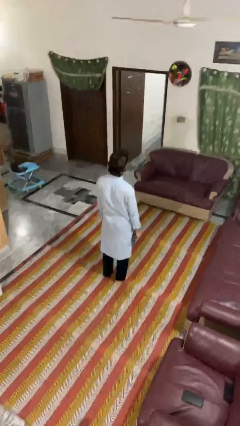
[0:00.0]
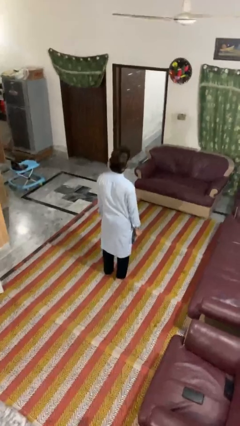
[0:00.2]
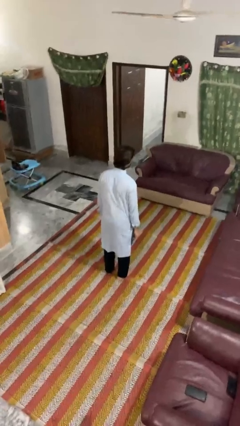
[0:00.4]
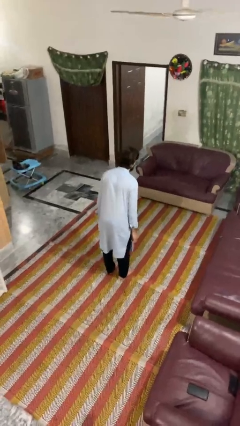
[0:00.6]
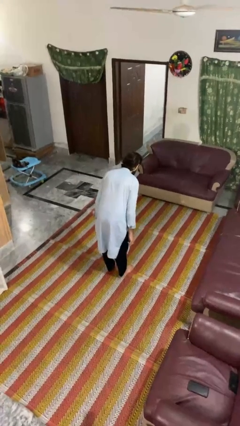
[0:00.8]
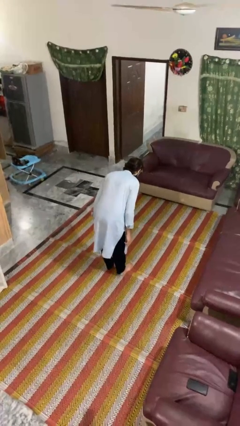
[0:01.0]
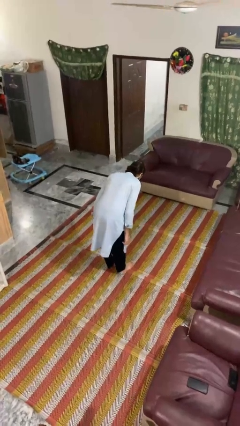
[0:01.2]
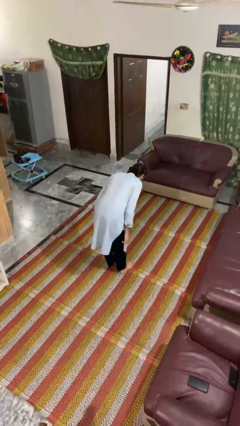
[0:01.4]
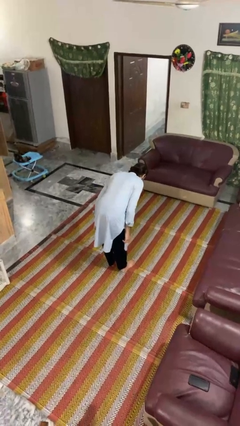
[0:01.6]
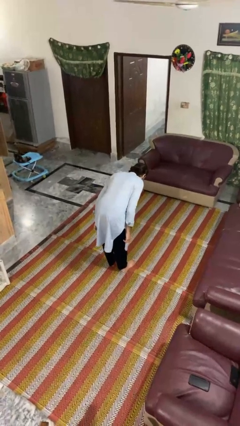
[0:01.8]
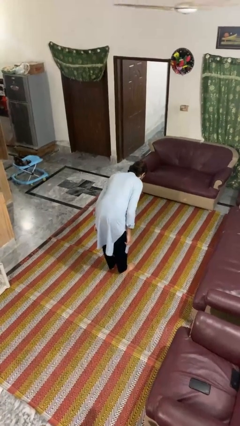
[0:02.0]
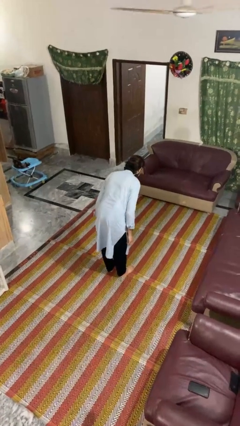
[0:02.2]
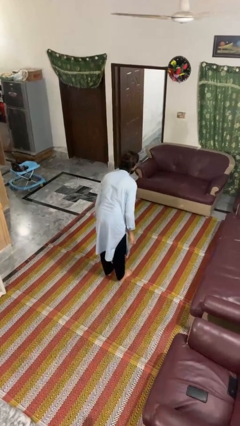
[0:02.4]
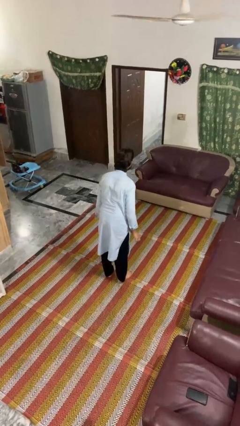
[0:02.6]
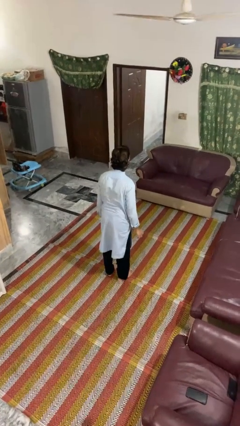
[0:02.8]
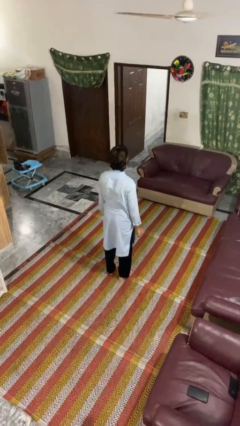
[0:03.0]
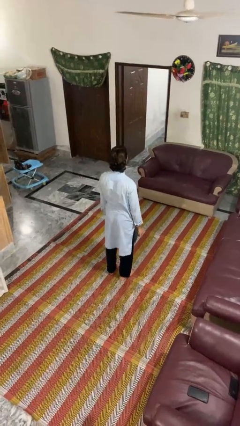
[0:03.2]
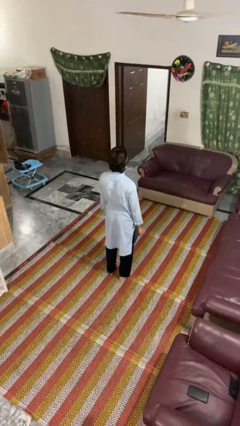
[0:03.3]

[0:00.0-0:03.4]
person bows

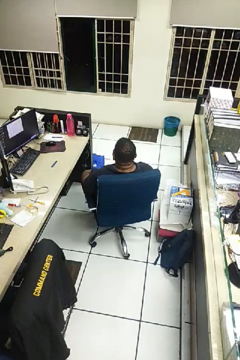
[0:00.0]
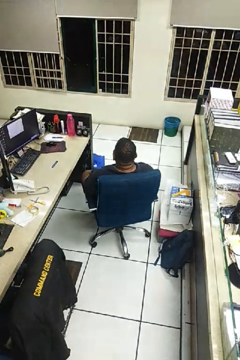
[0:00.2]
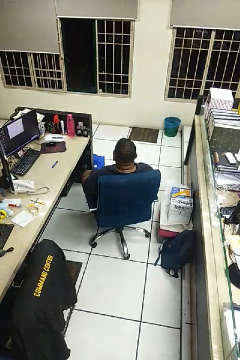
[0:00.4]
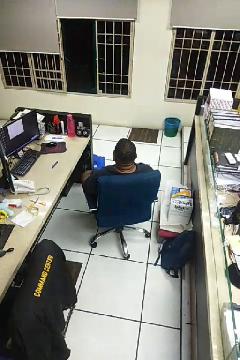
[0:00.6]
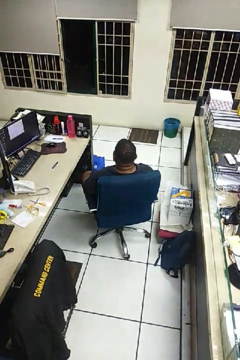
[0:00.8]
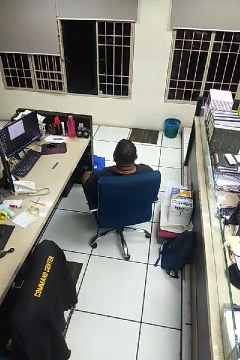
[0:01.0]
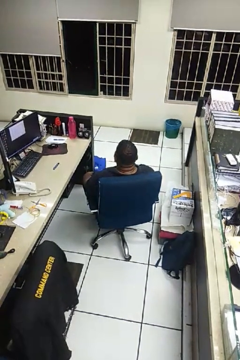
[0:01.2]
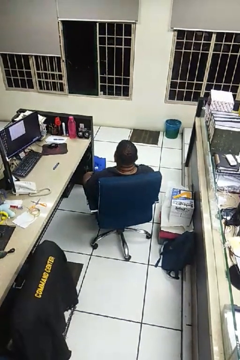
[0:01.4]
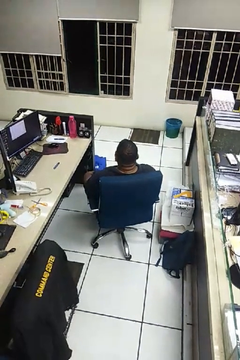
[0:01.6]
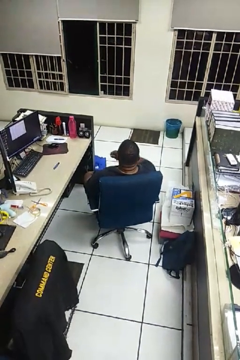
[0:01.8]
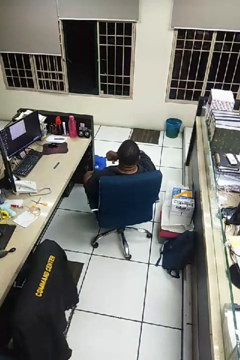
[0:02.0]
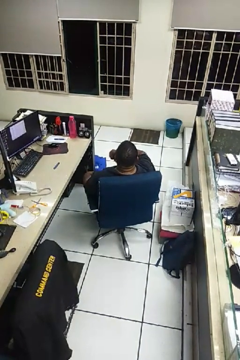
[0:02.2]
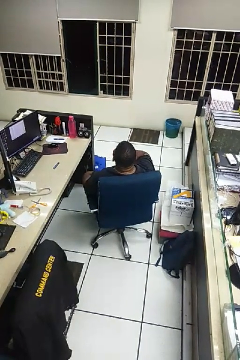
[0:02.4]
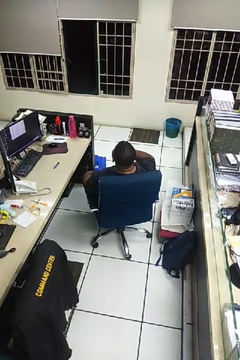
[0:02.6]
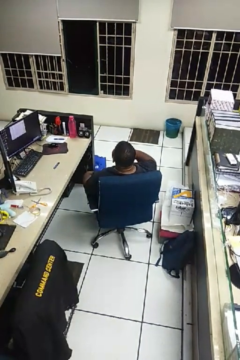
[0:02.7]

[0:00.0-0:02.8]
person gestures cut

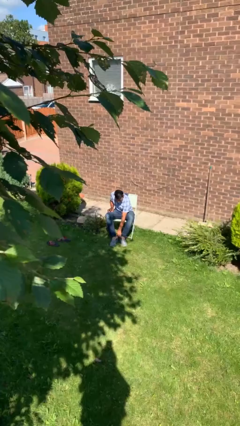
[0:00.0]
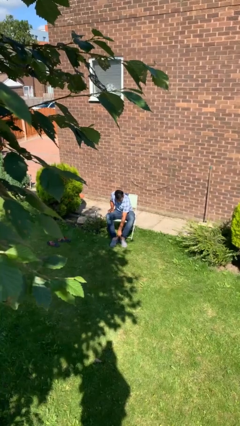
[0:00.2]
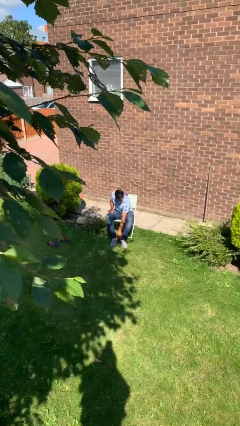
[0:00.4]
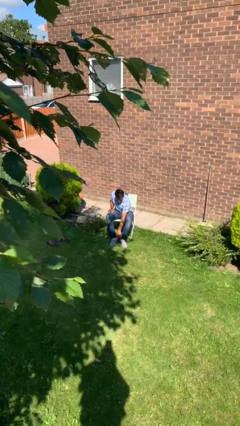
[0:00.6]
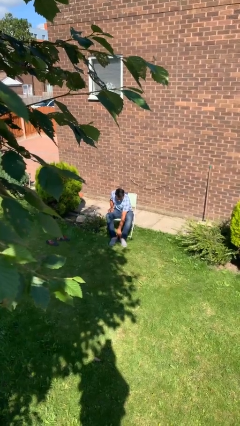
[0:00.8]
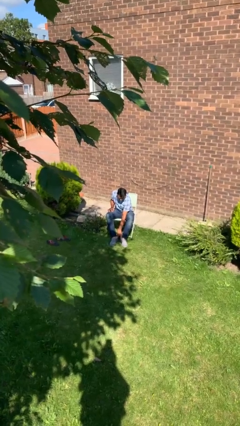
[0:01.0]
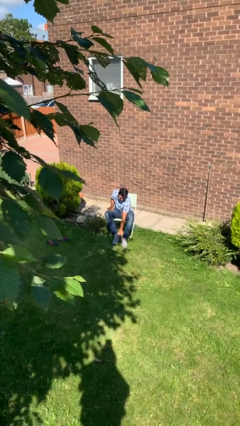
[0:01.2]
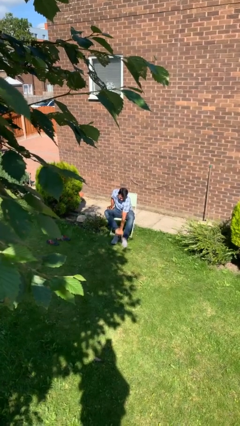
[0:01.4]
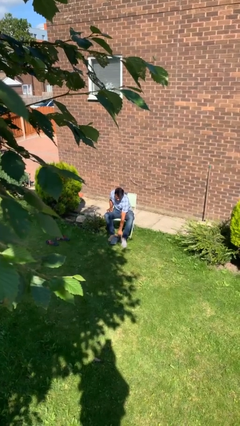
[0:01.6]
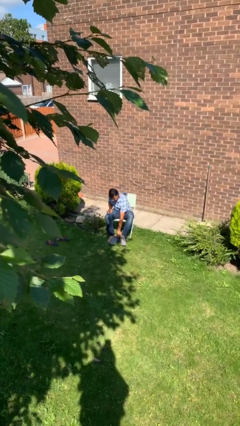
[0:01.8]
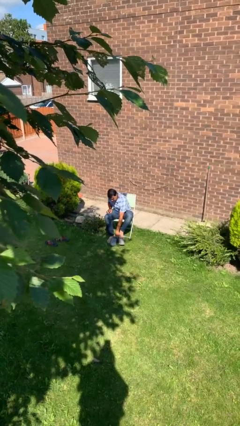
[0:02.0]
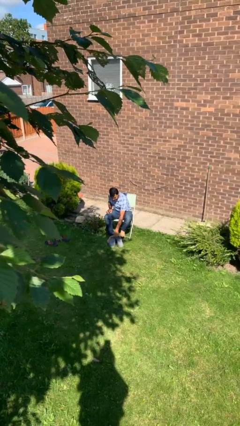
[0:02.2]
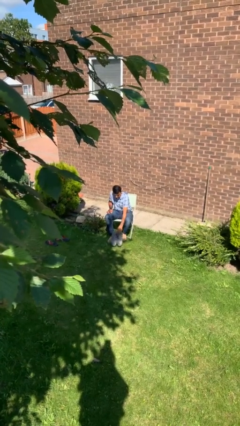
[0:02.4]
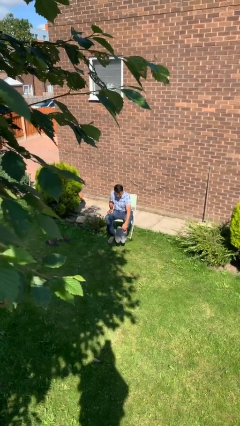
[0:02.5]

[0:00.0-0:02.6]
person takes off shoes

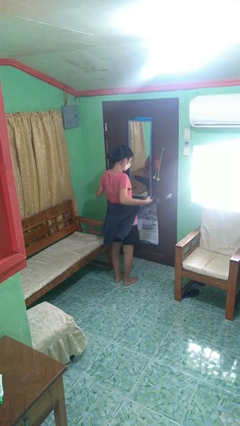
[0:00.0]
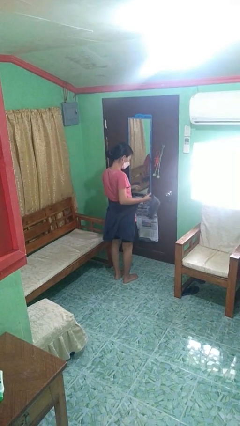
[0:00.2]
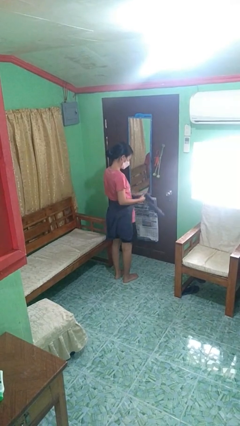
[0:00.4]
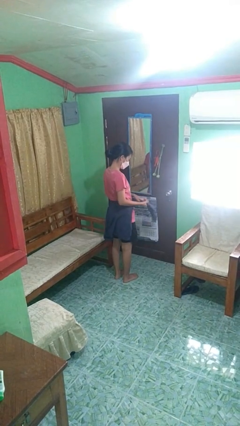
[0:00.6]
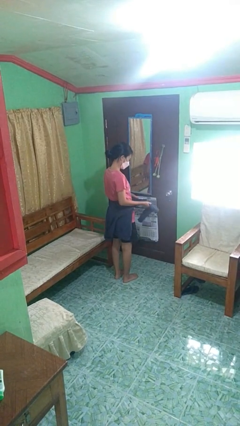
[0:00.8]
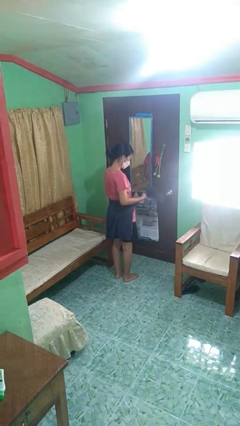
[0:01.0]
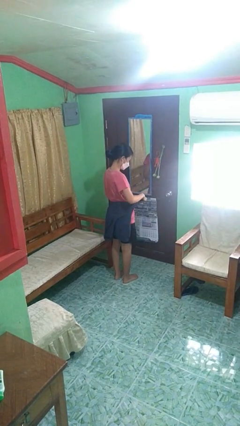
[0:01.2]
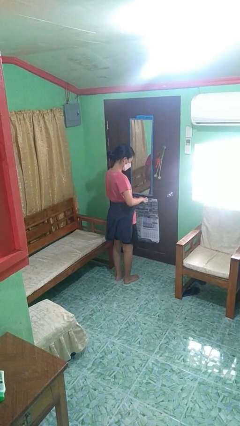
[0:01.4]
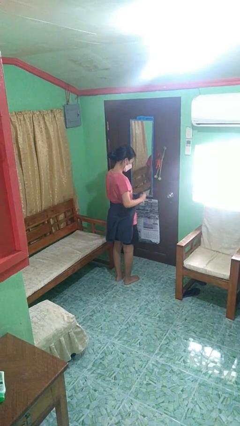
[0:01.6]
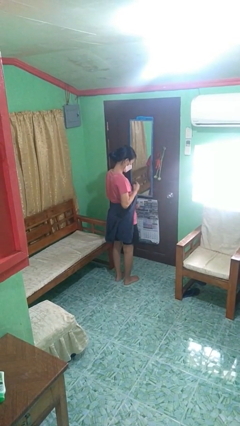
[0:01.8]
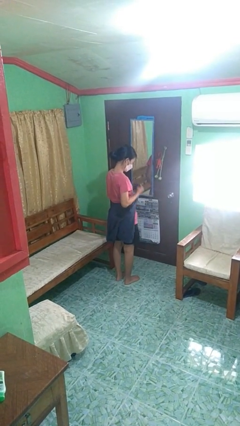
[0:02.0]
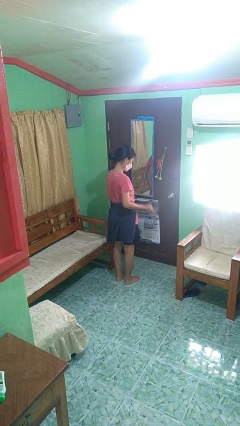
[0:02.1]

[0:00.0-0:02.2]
person ties jacket around waist

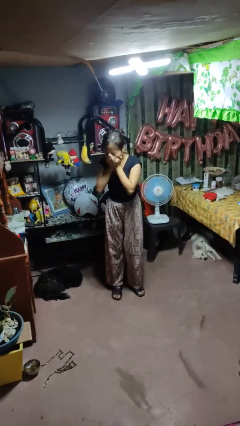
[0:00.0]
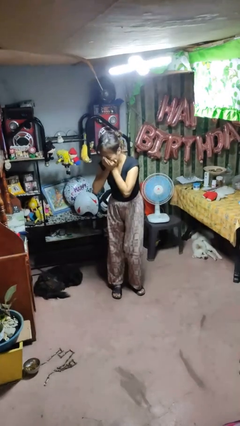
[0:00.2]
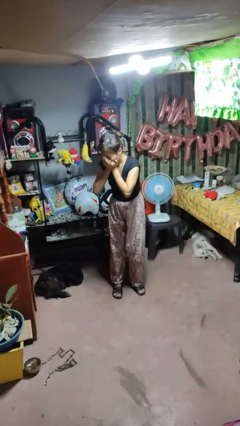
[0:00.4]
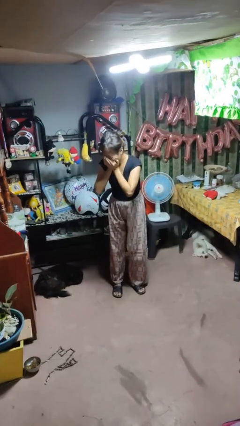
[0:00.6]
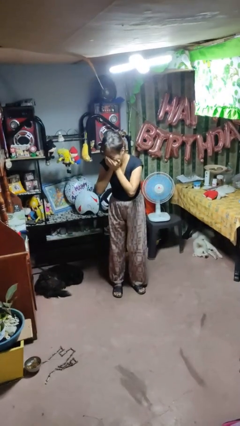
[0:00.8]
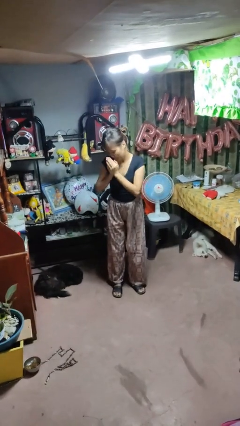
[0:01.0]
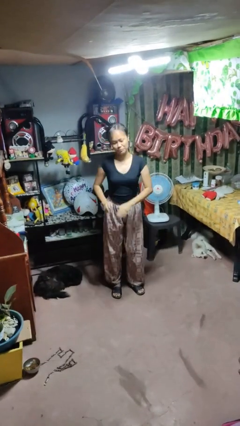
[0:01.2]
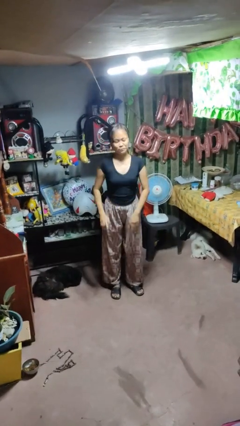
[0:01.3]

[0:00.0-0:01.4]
person sneezes into hand

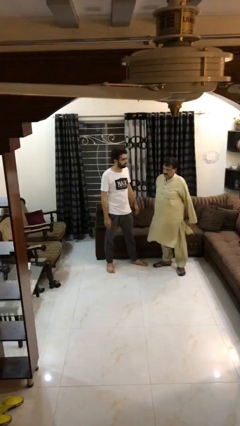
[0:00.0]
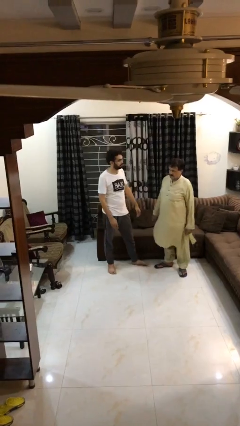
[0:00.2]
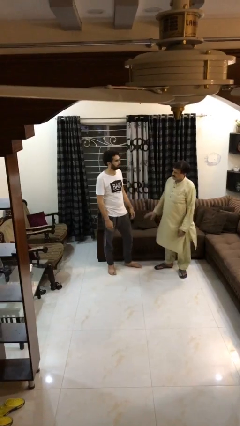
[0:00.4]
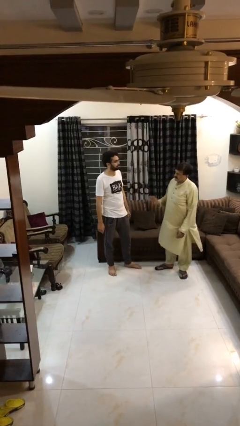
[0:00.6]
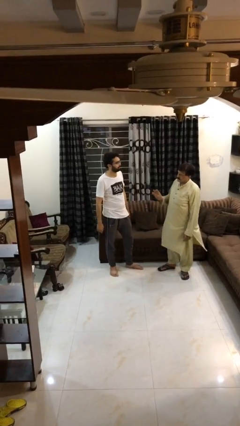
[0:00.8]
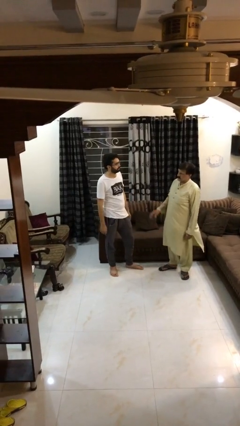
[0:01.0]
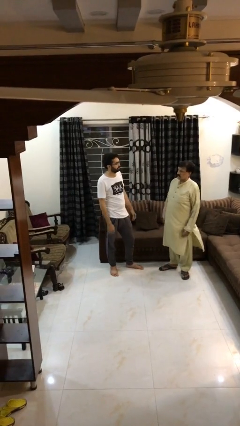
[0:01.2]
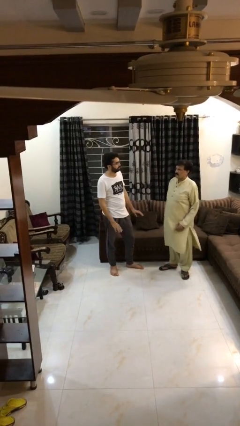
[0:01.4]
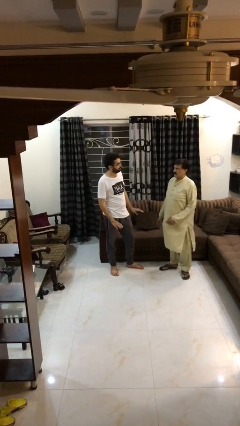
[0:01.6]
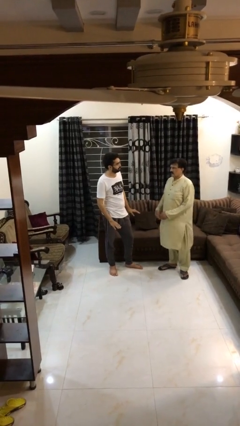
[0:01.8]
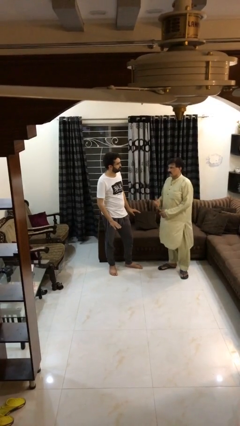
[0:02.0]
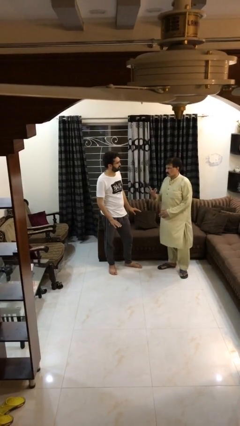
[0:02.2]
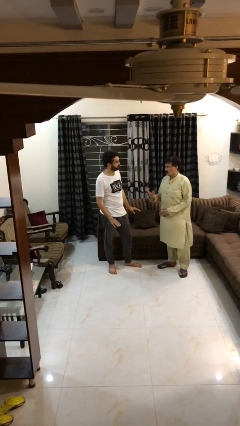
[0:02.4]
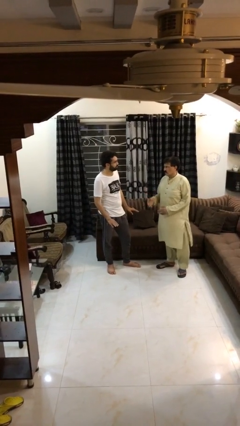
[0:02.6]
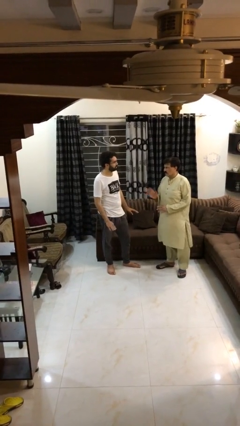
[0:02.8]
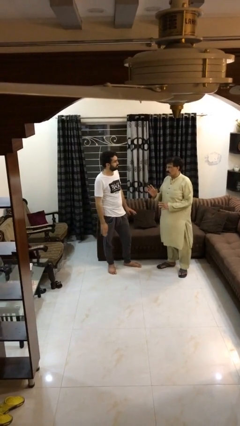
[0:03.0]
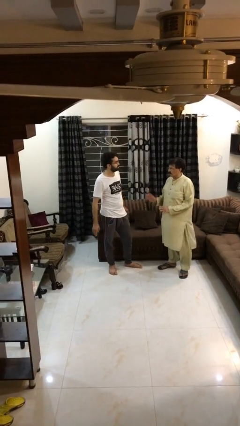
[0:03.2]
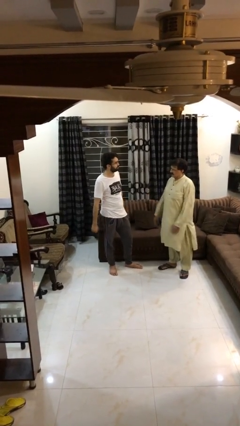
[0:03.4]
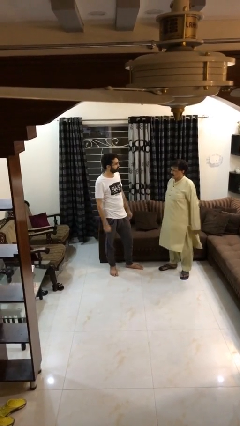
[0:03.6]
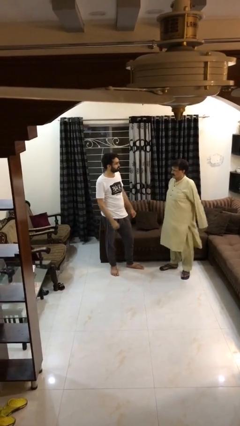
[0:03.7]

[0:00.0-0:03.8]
person talks to person

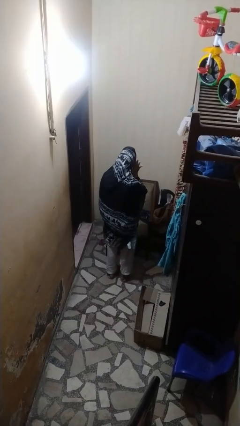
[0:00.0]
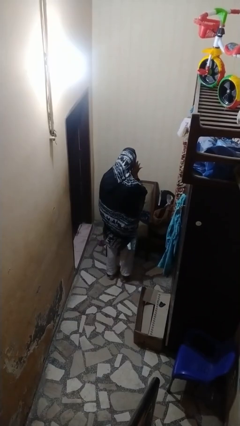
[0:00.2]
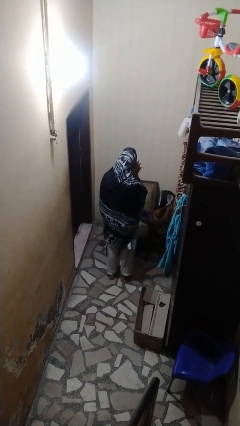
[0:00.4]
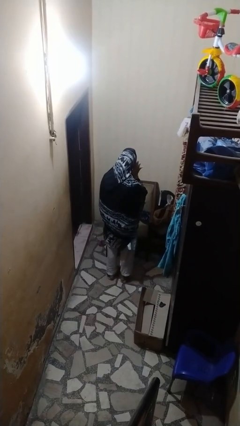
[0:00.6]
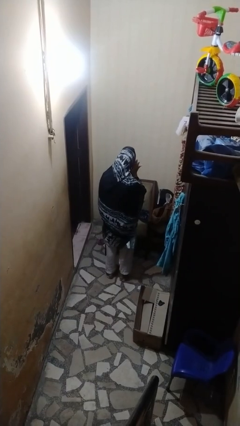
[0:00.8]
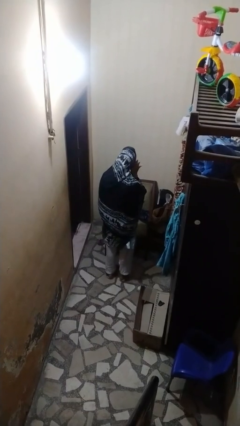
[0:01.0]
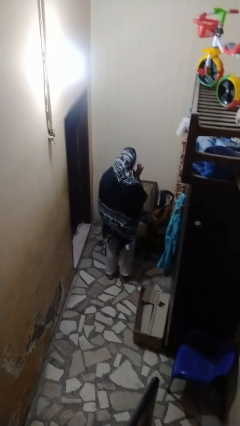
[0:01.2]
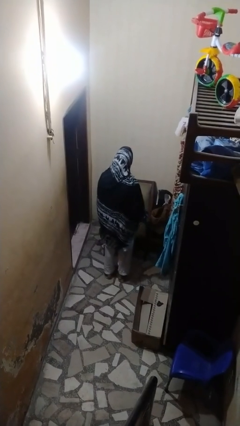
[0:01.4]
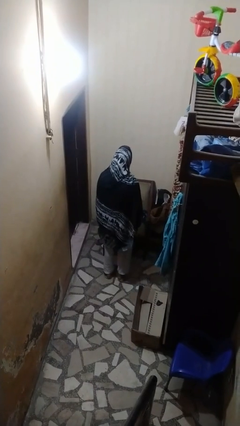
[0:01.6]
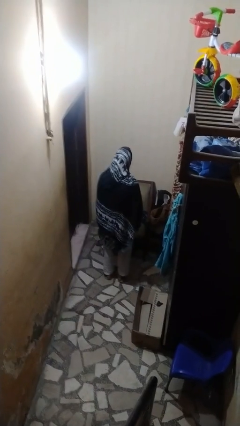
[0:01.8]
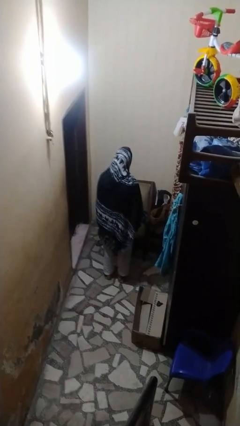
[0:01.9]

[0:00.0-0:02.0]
person gestures listen closely
